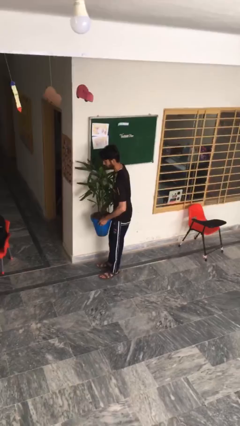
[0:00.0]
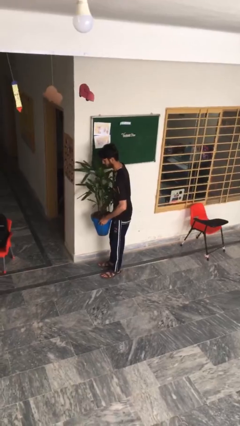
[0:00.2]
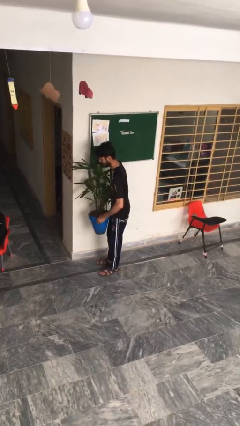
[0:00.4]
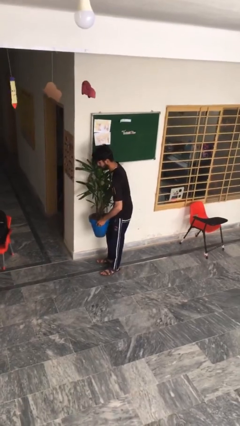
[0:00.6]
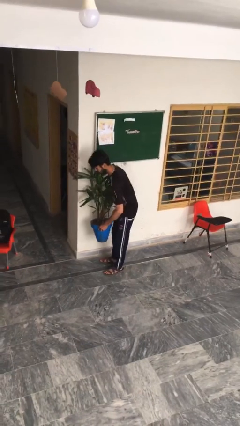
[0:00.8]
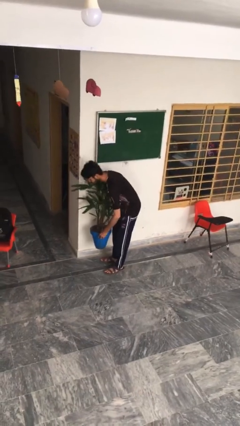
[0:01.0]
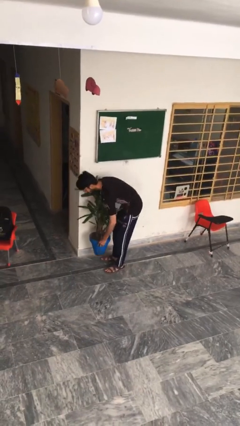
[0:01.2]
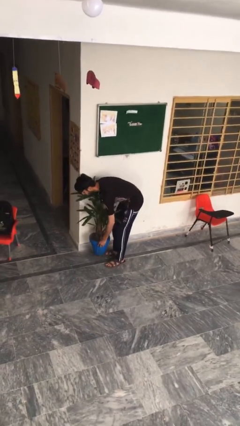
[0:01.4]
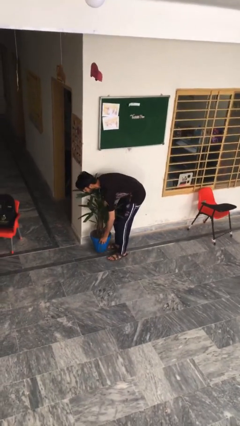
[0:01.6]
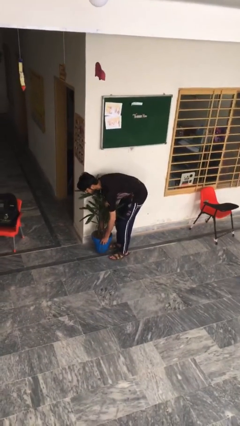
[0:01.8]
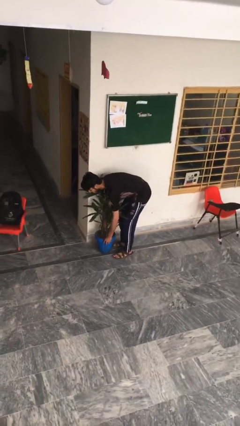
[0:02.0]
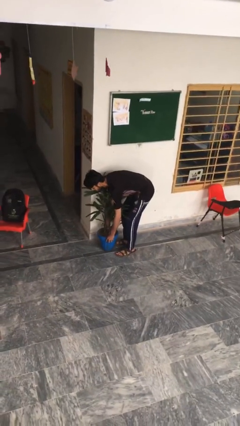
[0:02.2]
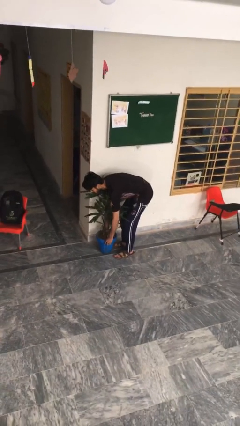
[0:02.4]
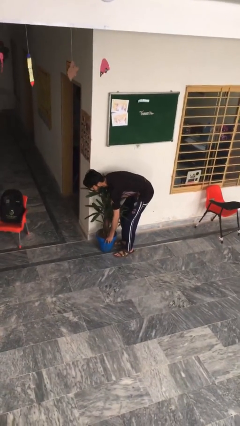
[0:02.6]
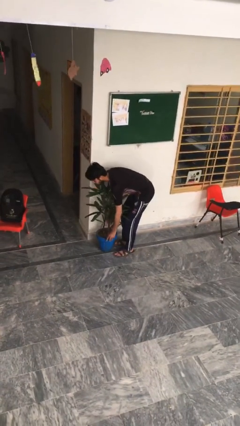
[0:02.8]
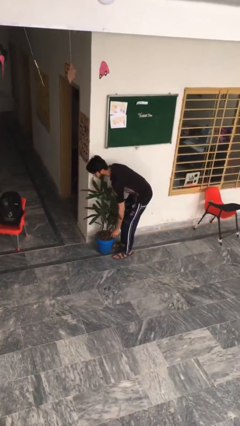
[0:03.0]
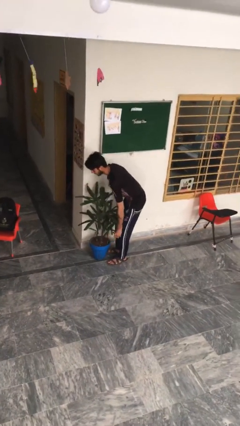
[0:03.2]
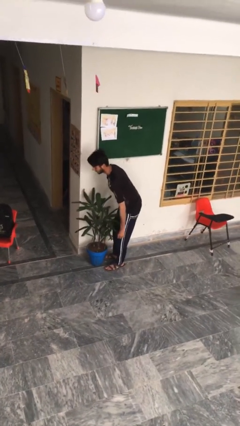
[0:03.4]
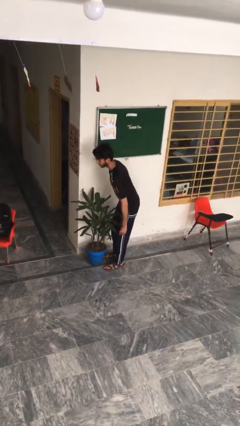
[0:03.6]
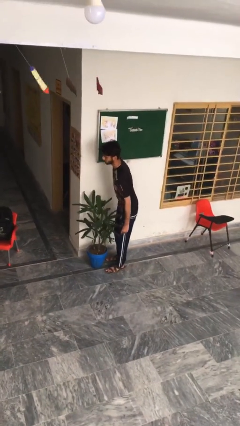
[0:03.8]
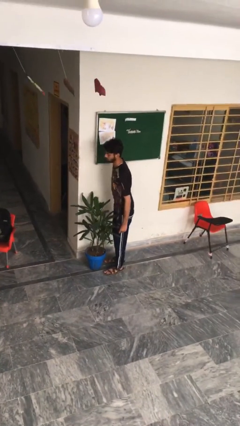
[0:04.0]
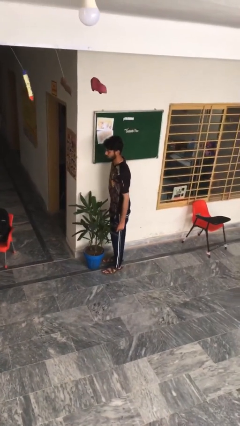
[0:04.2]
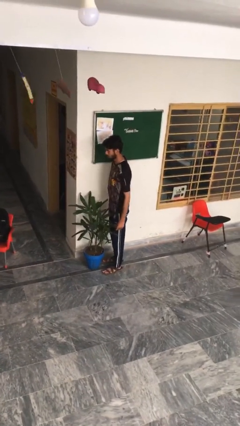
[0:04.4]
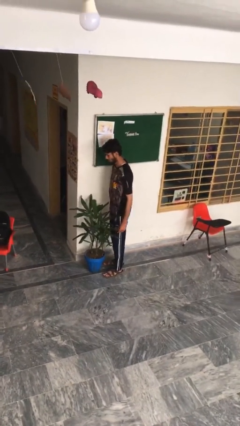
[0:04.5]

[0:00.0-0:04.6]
person puts down object on floor

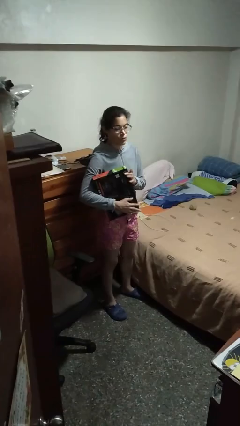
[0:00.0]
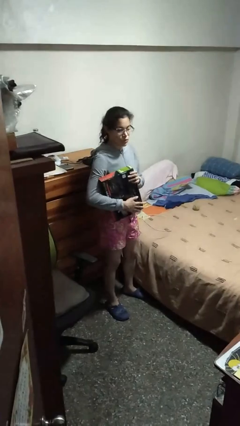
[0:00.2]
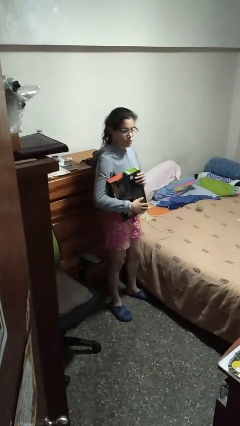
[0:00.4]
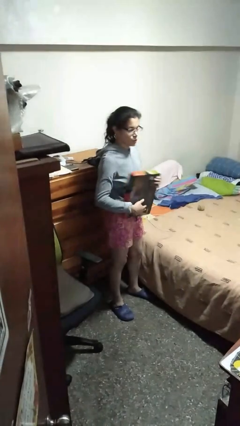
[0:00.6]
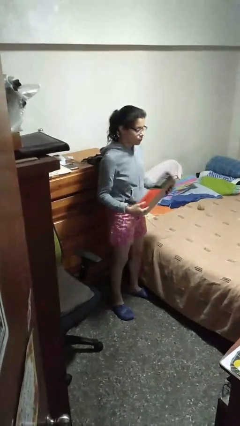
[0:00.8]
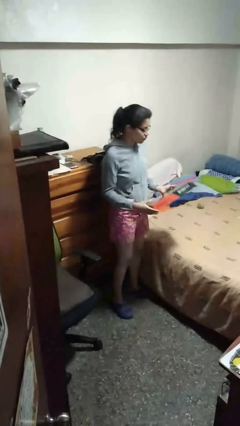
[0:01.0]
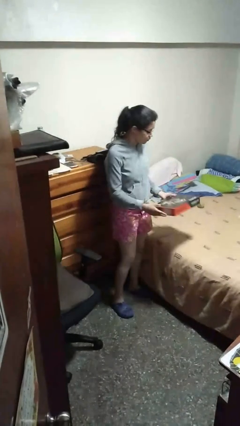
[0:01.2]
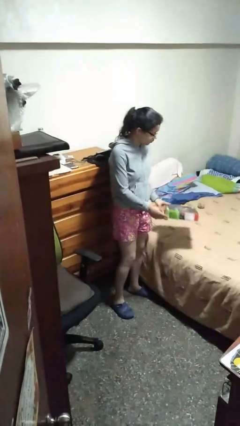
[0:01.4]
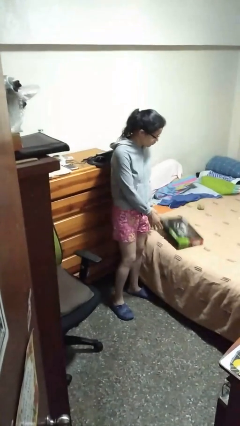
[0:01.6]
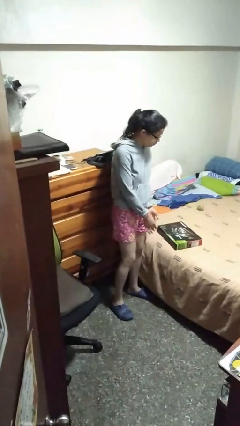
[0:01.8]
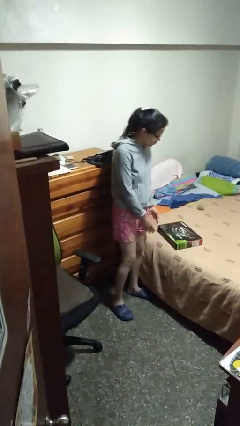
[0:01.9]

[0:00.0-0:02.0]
person puts down object on bed

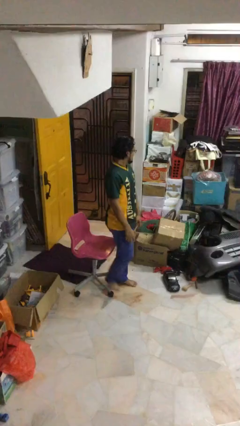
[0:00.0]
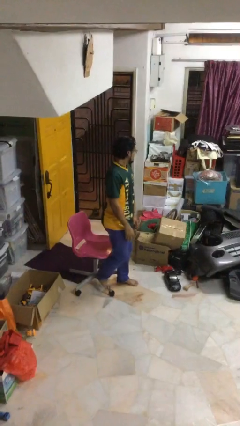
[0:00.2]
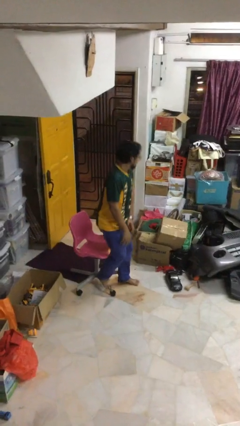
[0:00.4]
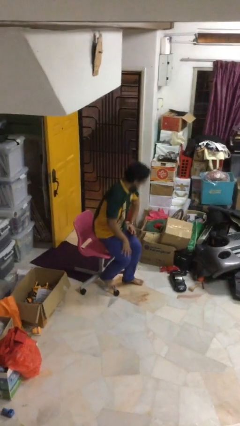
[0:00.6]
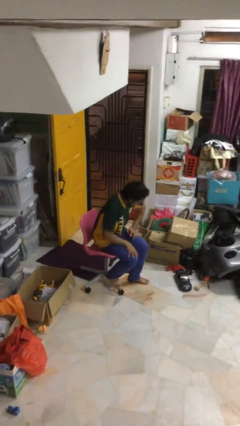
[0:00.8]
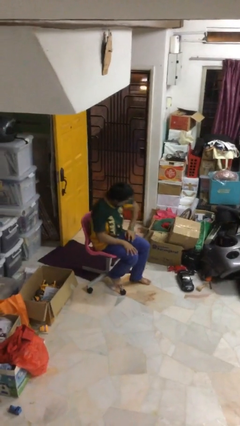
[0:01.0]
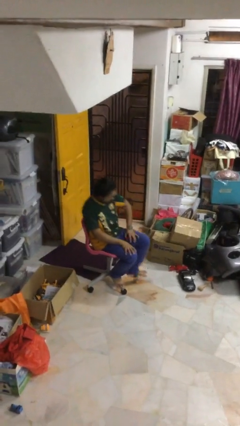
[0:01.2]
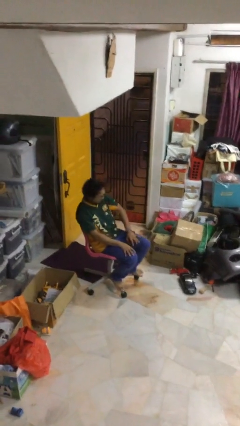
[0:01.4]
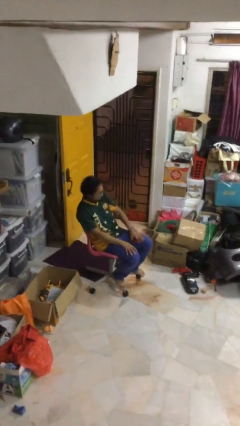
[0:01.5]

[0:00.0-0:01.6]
person sits down

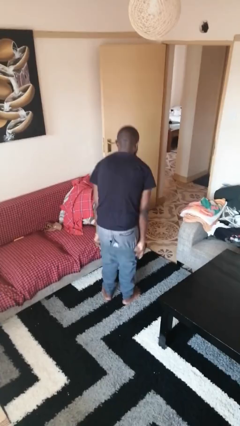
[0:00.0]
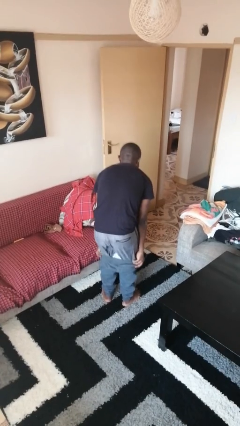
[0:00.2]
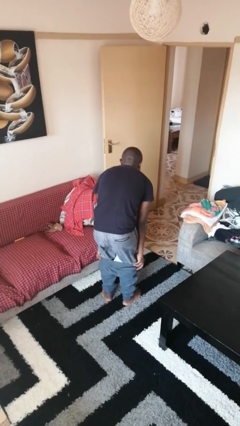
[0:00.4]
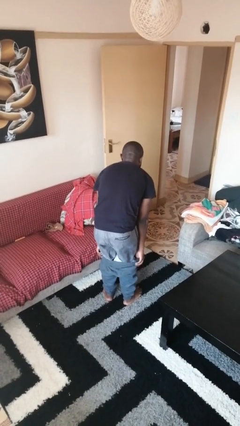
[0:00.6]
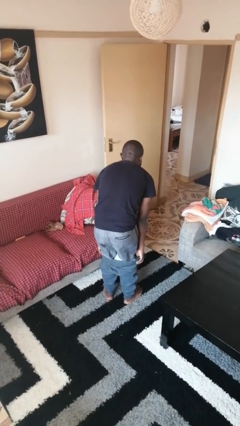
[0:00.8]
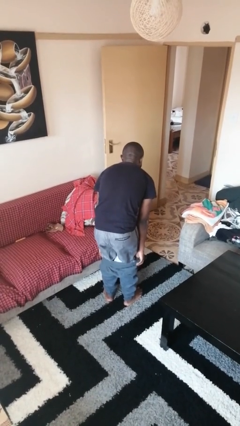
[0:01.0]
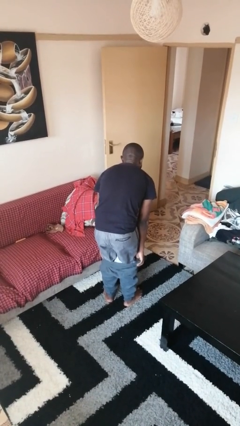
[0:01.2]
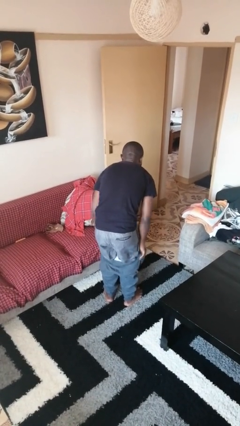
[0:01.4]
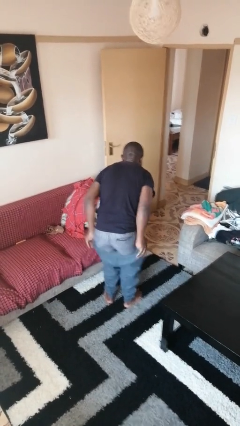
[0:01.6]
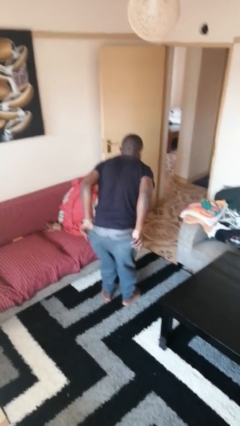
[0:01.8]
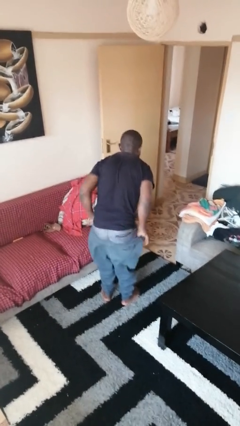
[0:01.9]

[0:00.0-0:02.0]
person takes off pants

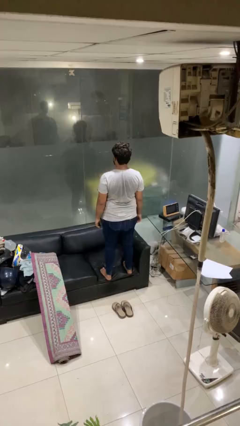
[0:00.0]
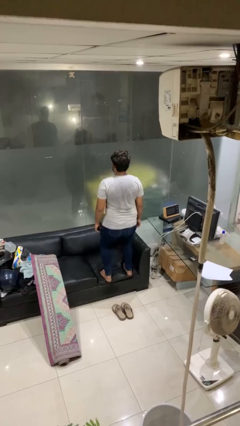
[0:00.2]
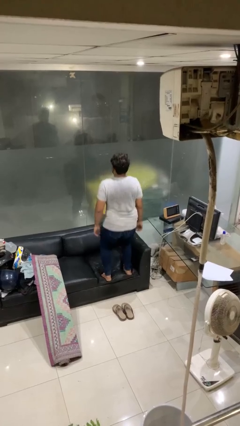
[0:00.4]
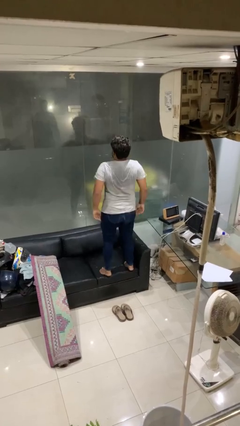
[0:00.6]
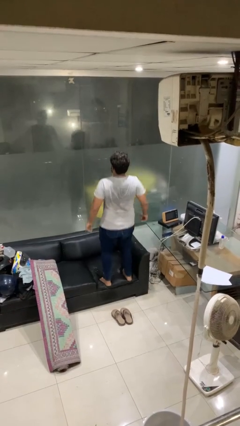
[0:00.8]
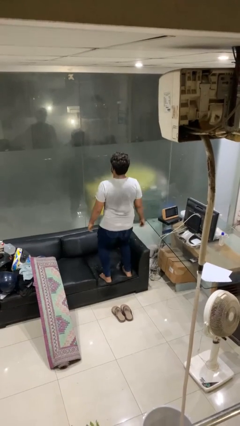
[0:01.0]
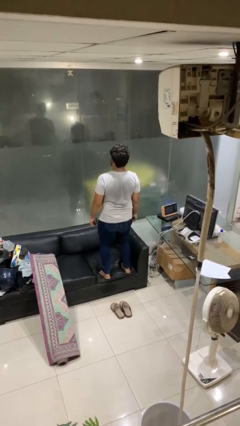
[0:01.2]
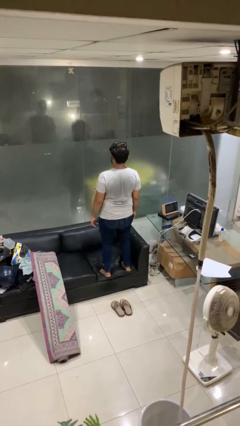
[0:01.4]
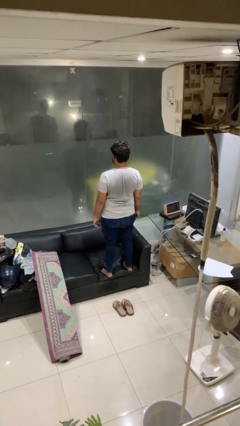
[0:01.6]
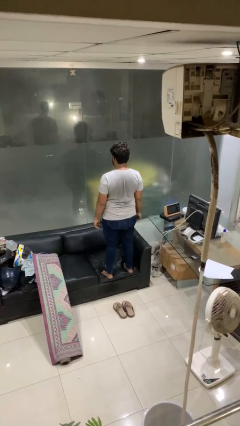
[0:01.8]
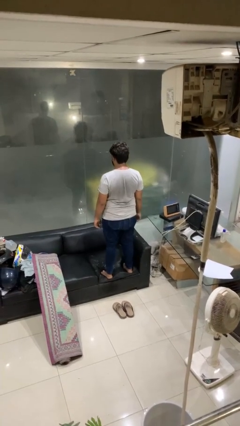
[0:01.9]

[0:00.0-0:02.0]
person jumps on couch

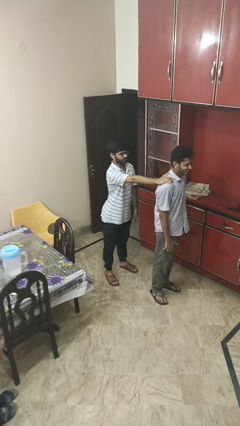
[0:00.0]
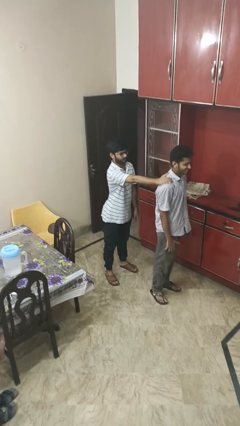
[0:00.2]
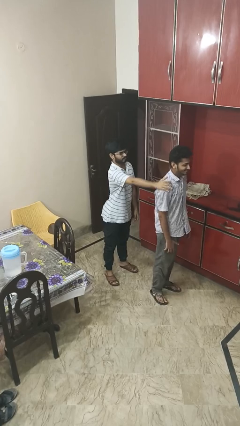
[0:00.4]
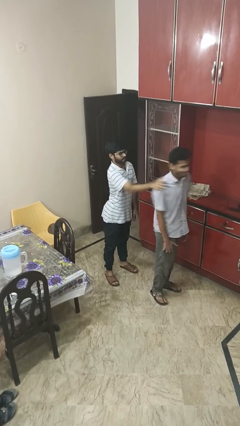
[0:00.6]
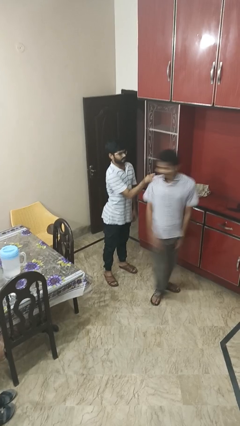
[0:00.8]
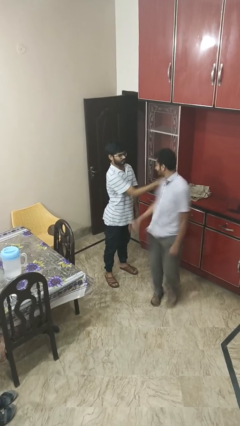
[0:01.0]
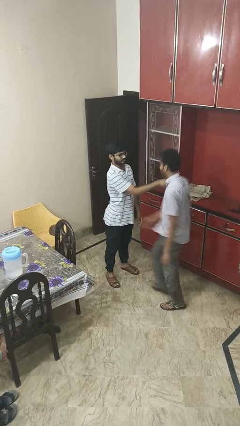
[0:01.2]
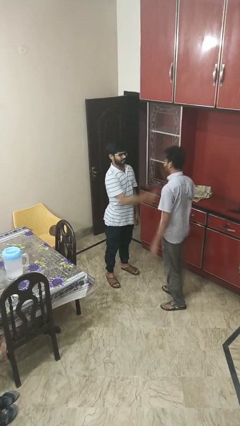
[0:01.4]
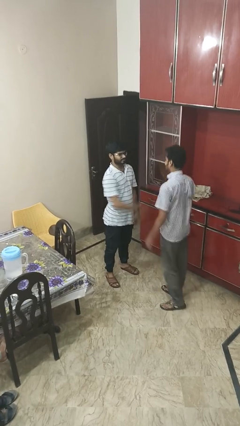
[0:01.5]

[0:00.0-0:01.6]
person spins person around

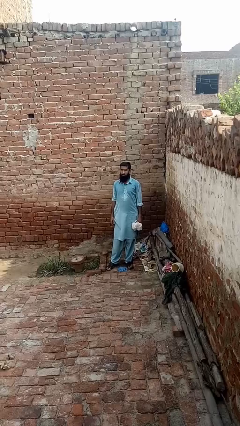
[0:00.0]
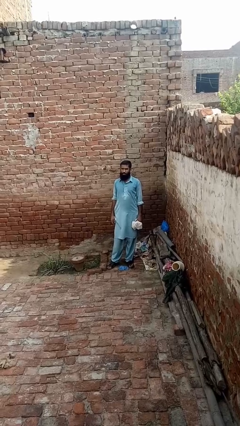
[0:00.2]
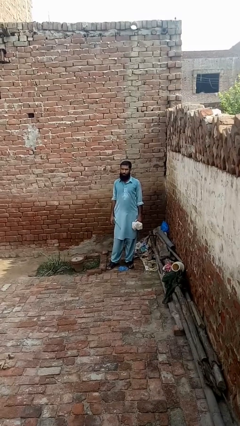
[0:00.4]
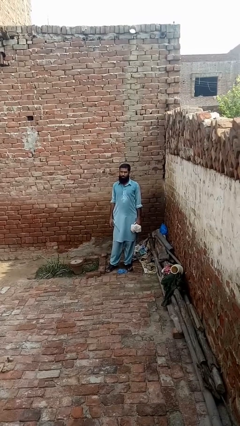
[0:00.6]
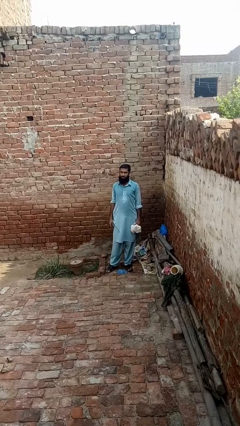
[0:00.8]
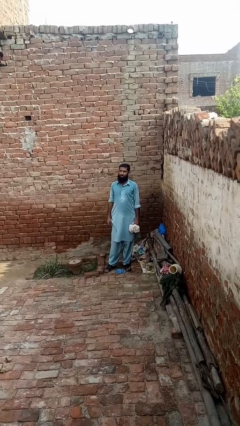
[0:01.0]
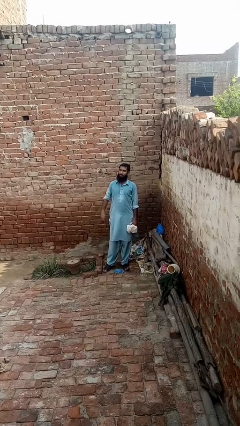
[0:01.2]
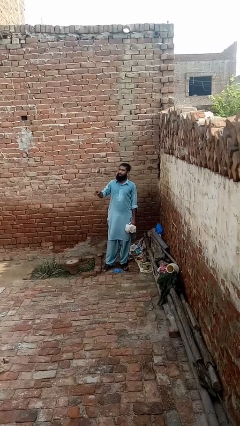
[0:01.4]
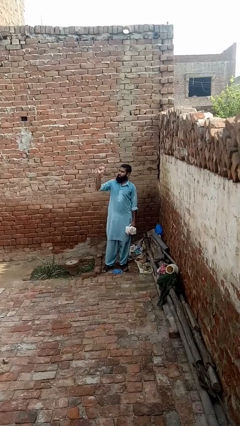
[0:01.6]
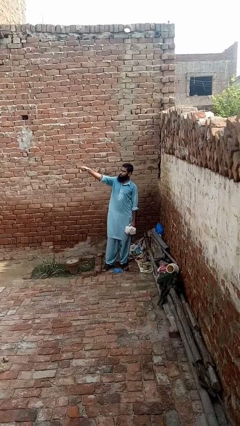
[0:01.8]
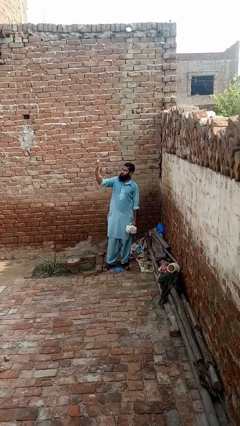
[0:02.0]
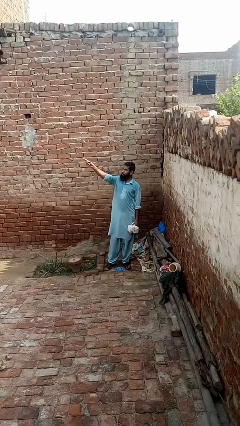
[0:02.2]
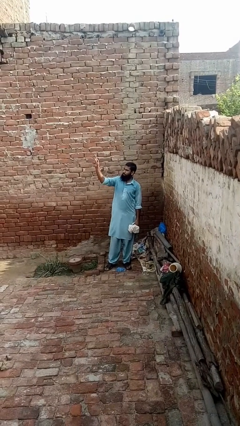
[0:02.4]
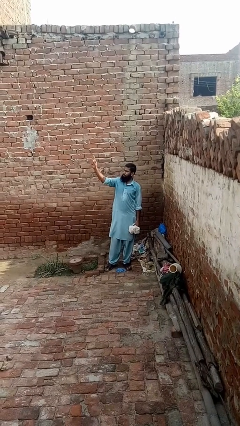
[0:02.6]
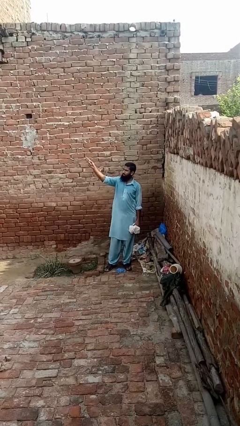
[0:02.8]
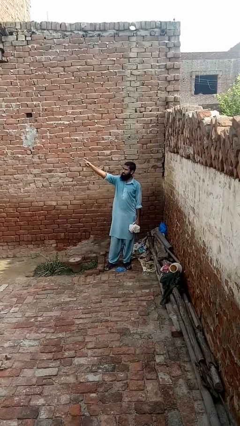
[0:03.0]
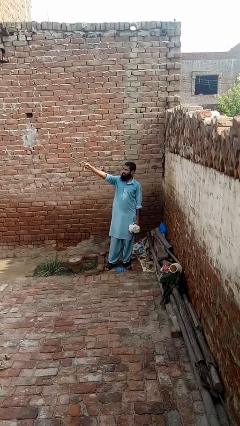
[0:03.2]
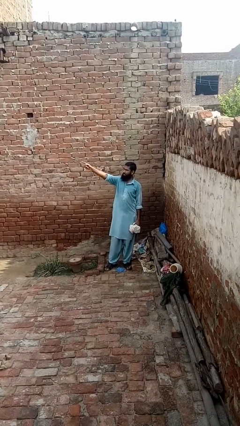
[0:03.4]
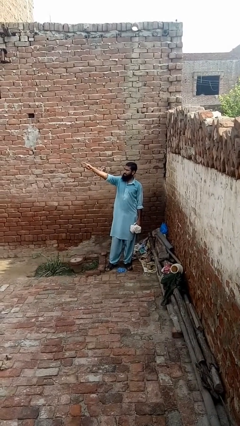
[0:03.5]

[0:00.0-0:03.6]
person points at person
